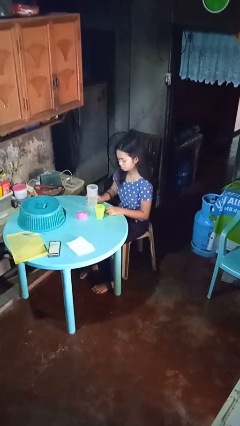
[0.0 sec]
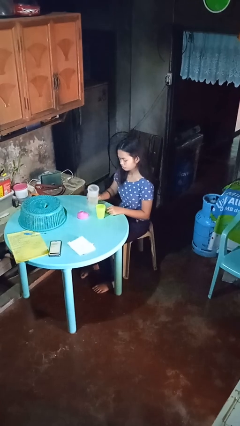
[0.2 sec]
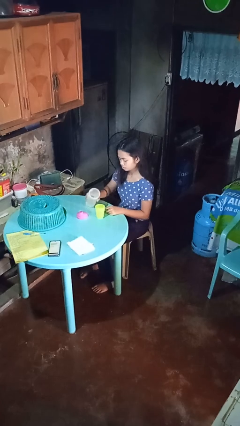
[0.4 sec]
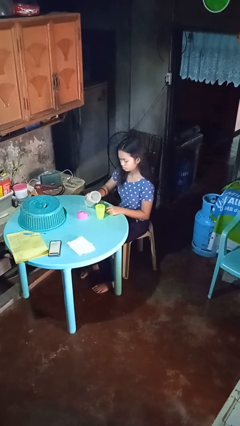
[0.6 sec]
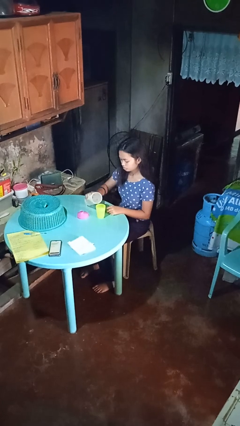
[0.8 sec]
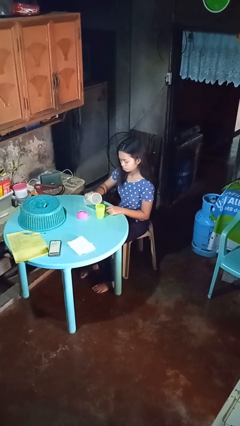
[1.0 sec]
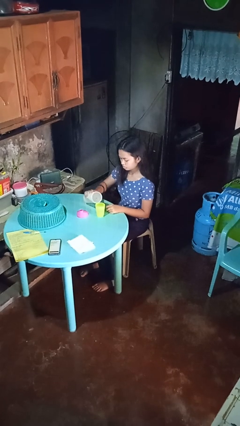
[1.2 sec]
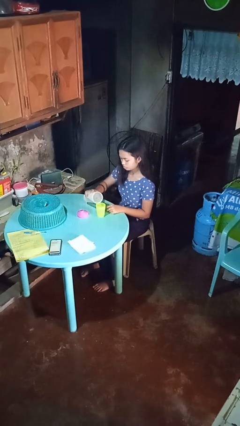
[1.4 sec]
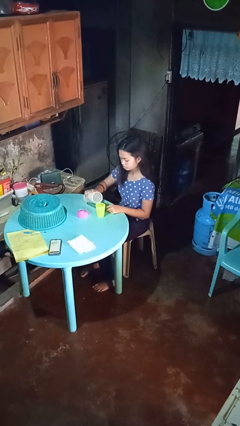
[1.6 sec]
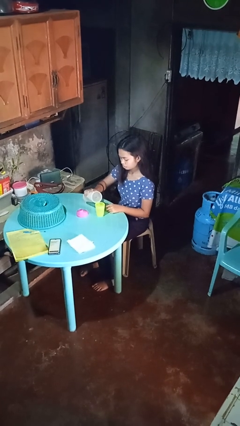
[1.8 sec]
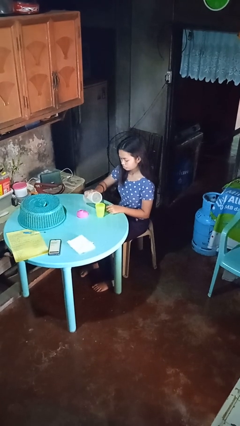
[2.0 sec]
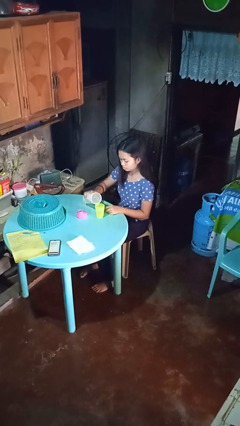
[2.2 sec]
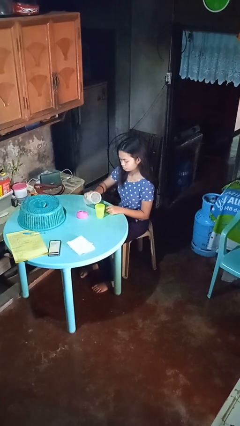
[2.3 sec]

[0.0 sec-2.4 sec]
person pours liquid into cup

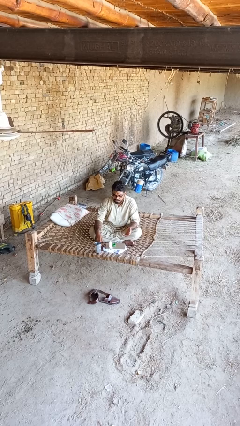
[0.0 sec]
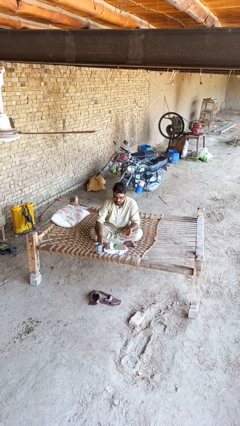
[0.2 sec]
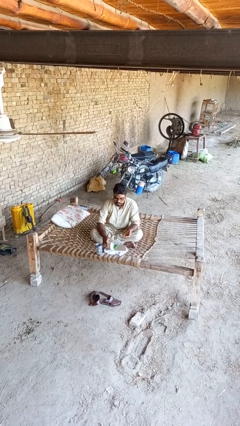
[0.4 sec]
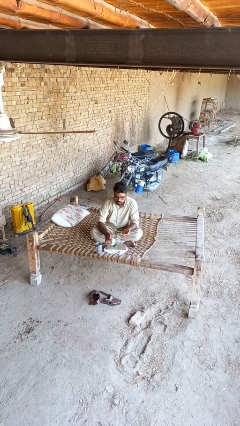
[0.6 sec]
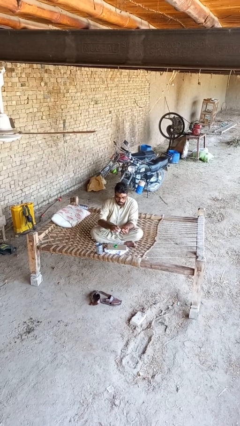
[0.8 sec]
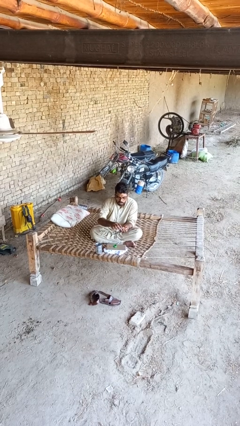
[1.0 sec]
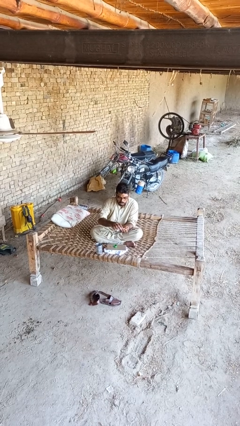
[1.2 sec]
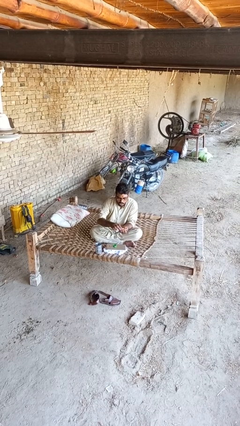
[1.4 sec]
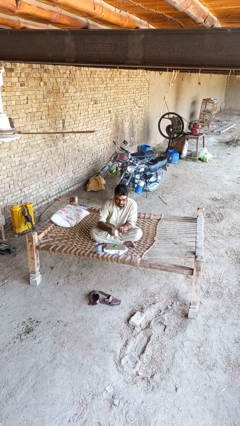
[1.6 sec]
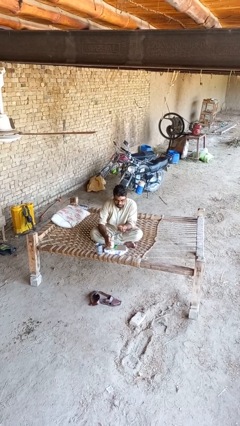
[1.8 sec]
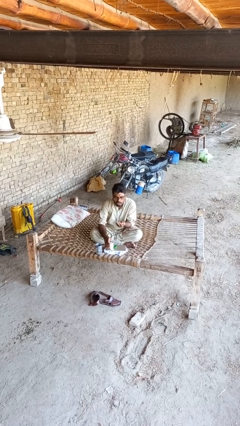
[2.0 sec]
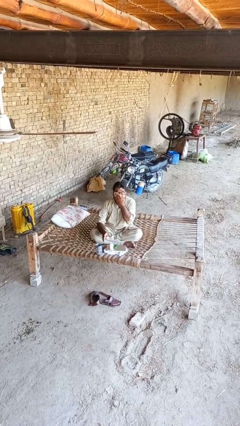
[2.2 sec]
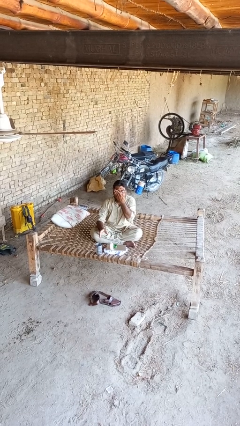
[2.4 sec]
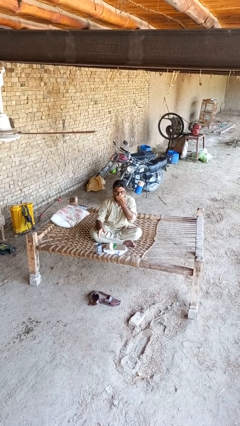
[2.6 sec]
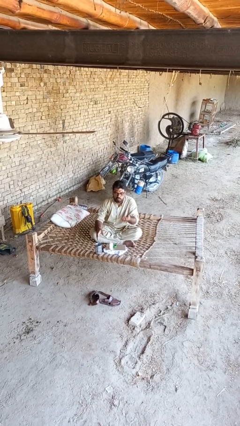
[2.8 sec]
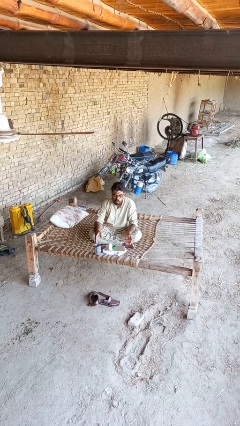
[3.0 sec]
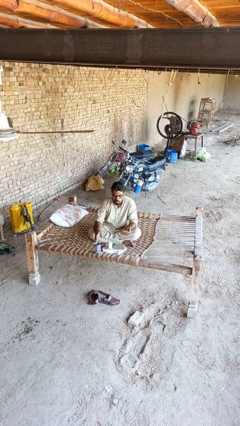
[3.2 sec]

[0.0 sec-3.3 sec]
person takes medicine pills

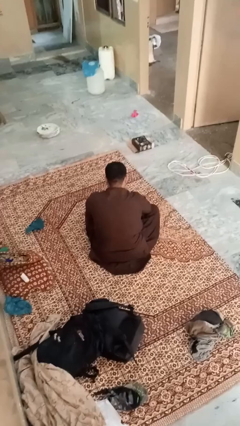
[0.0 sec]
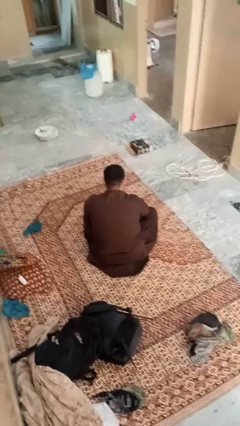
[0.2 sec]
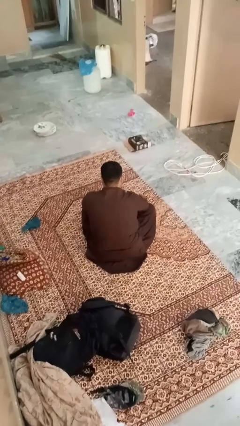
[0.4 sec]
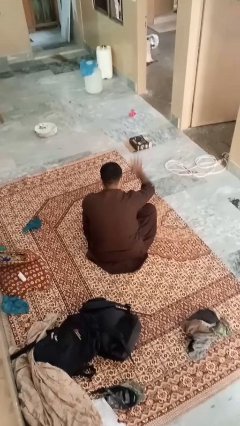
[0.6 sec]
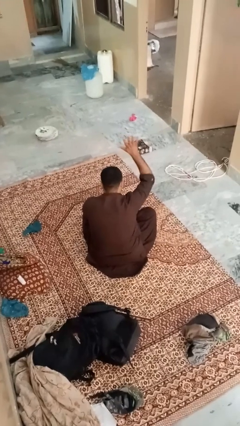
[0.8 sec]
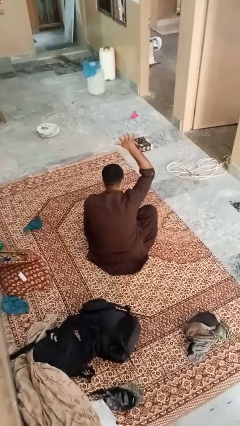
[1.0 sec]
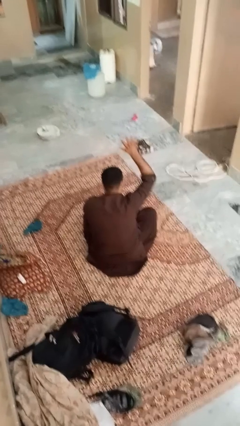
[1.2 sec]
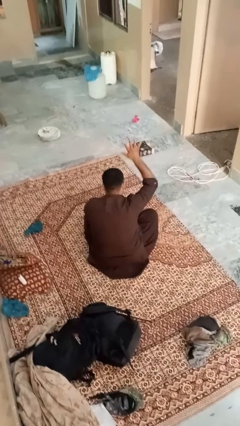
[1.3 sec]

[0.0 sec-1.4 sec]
person gestures number five

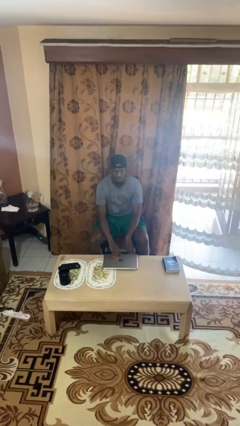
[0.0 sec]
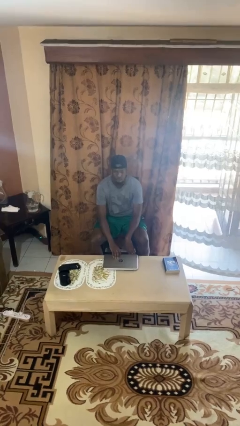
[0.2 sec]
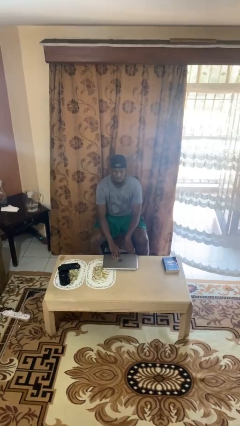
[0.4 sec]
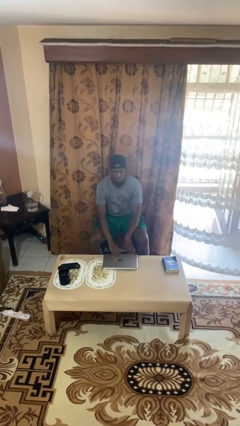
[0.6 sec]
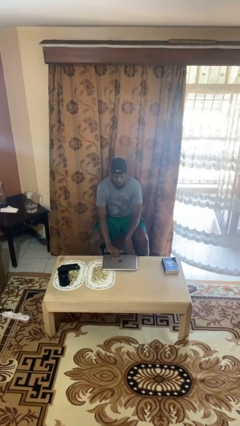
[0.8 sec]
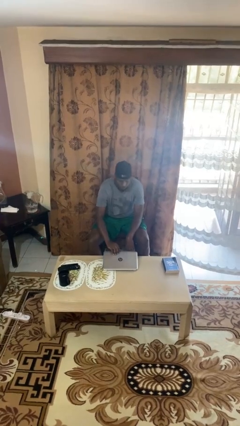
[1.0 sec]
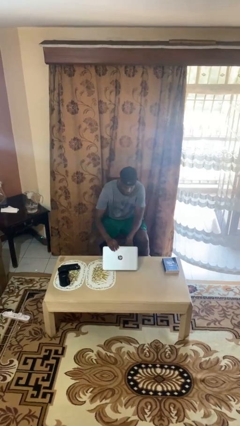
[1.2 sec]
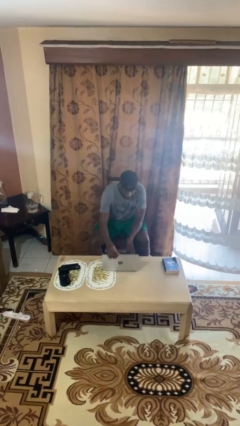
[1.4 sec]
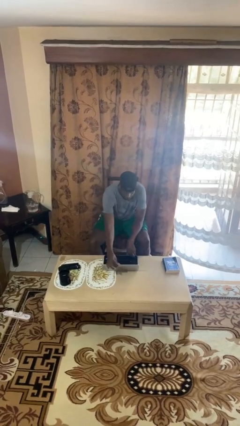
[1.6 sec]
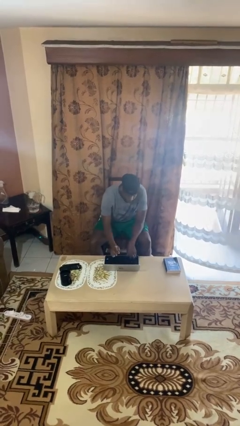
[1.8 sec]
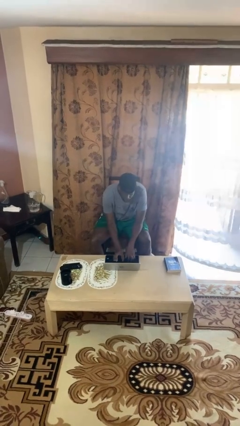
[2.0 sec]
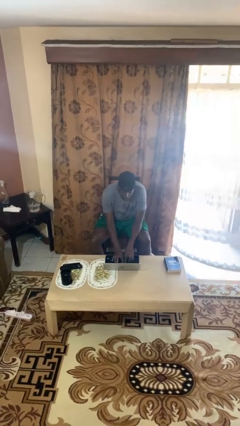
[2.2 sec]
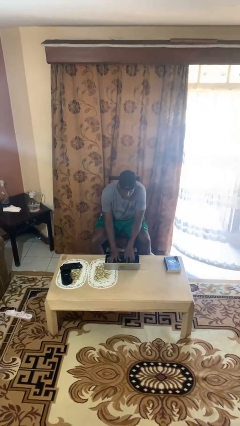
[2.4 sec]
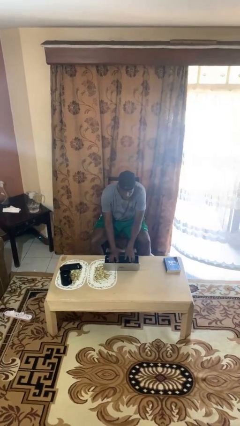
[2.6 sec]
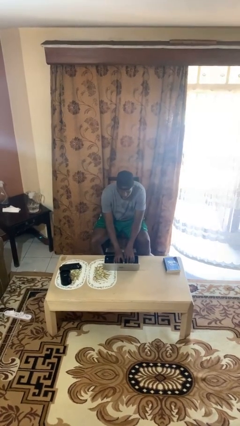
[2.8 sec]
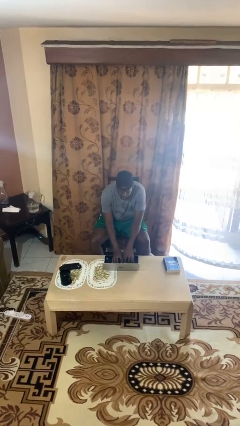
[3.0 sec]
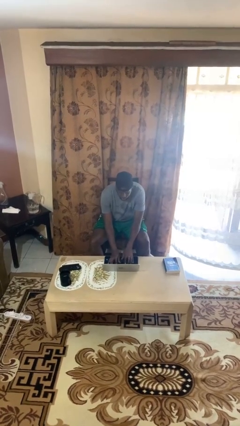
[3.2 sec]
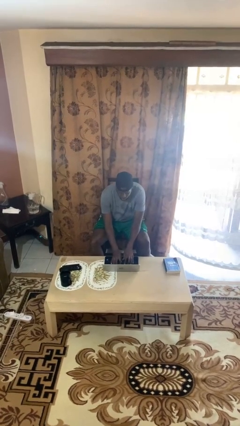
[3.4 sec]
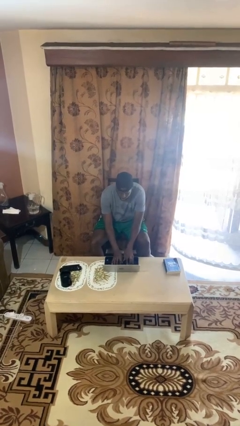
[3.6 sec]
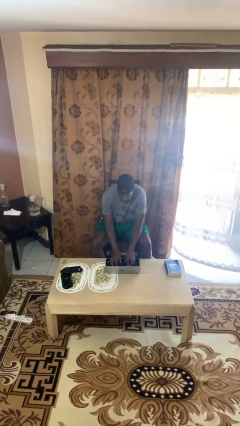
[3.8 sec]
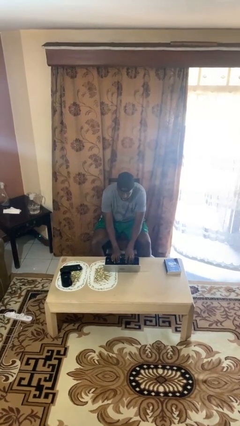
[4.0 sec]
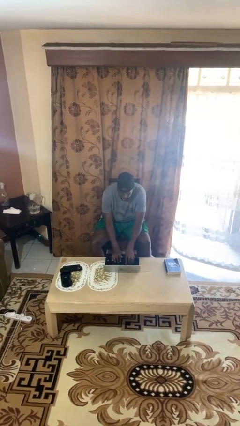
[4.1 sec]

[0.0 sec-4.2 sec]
person interacts with laptop

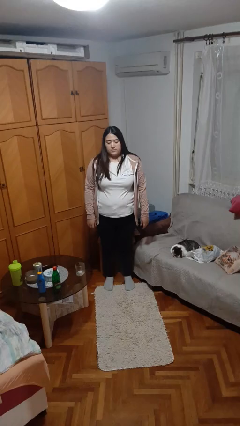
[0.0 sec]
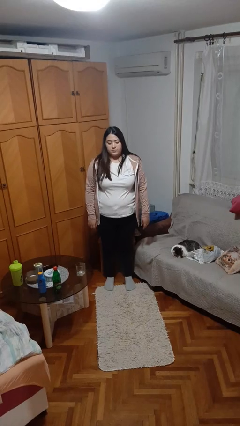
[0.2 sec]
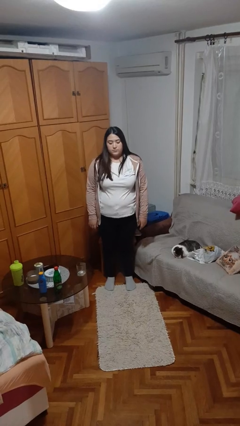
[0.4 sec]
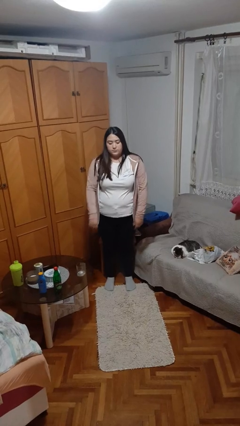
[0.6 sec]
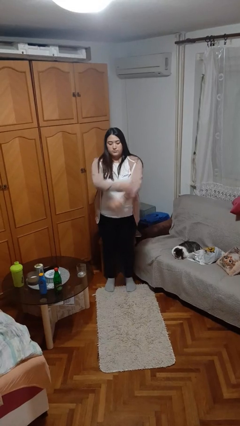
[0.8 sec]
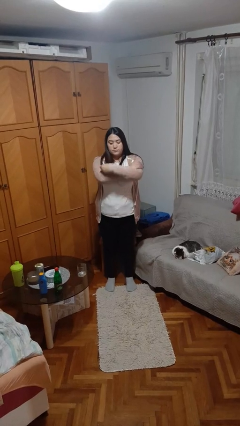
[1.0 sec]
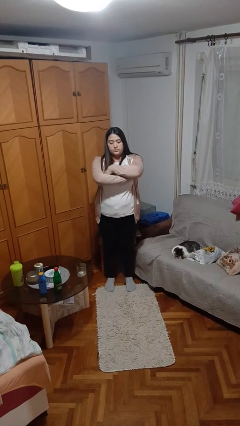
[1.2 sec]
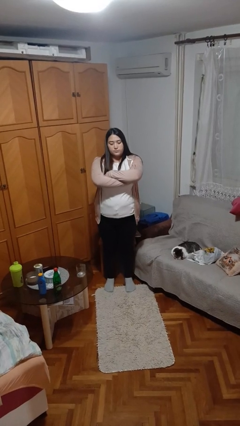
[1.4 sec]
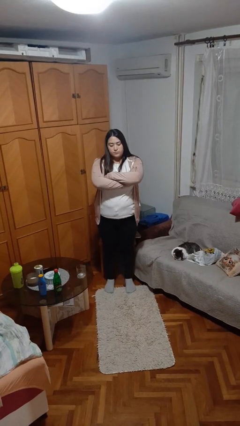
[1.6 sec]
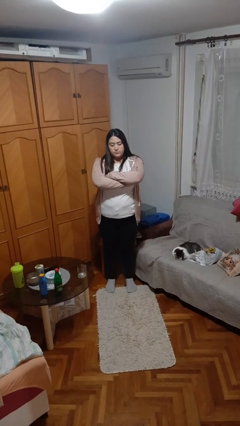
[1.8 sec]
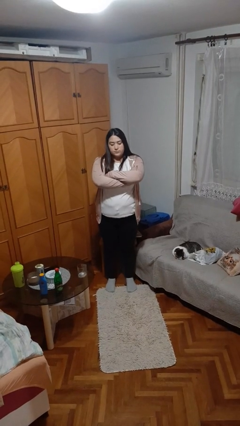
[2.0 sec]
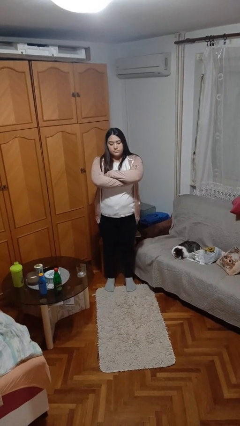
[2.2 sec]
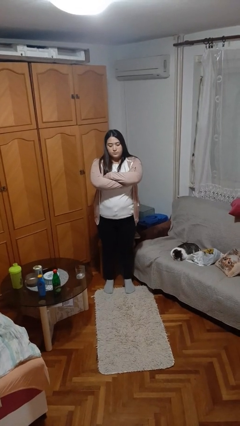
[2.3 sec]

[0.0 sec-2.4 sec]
person crosses arms

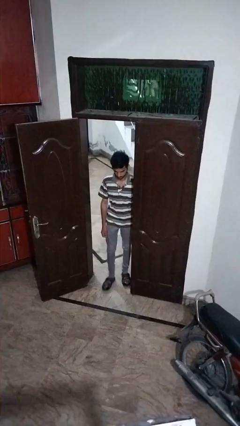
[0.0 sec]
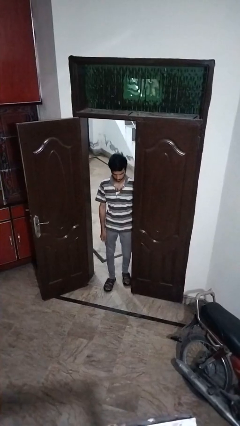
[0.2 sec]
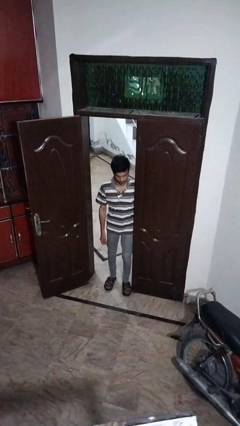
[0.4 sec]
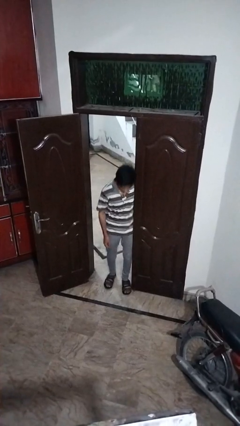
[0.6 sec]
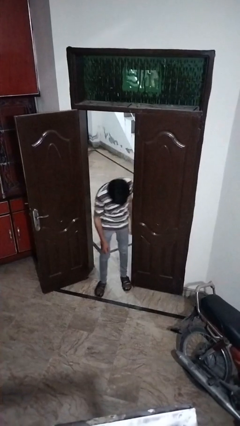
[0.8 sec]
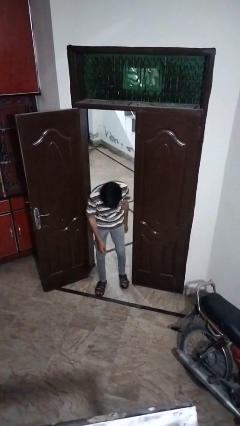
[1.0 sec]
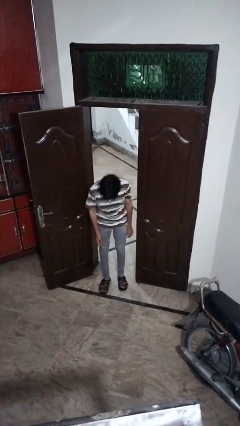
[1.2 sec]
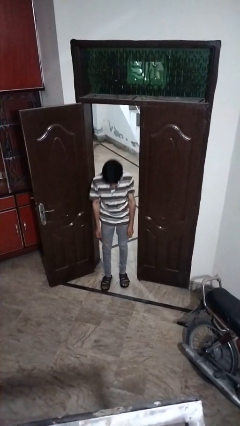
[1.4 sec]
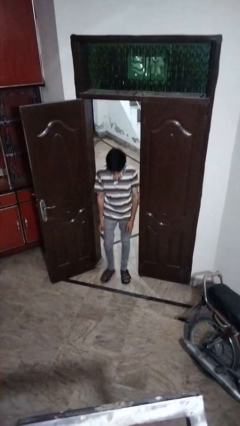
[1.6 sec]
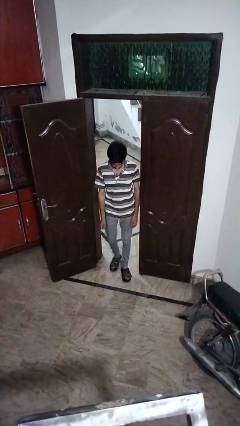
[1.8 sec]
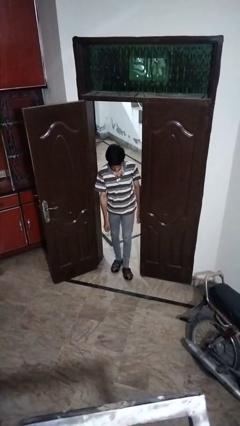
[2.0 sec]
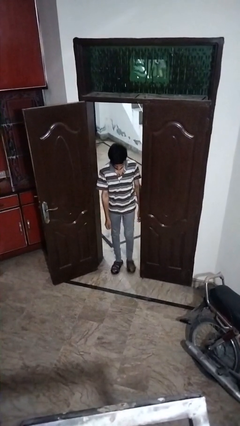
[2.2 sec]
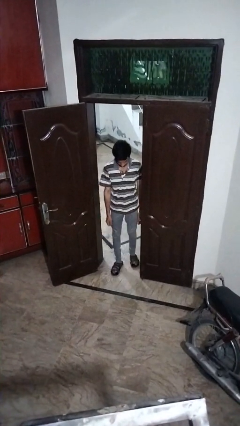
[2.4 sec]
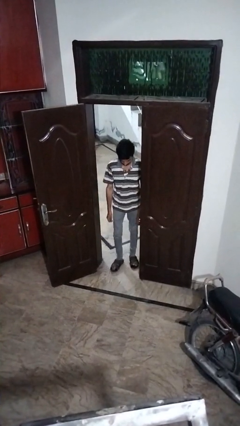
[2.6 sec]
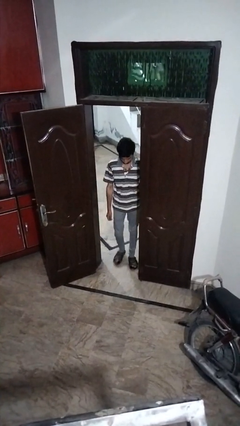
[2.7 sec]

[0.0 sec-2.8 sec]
person bumps into wall

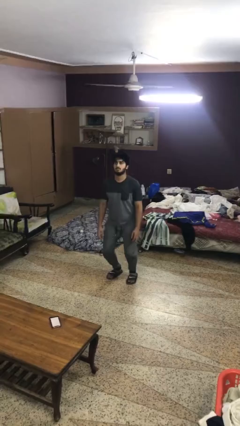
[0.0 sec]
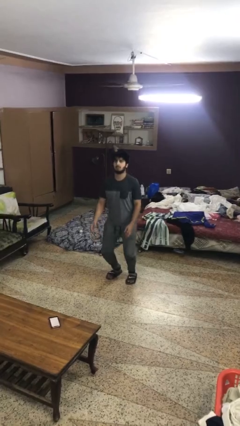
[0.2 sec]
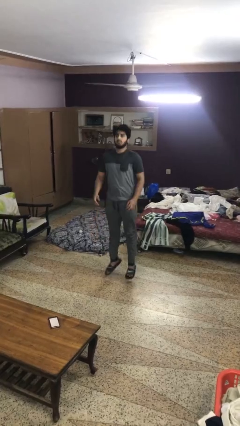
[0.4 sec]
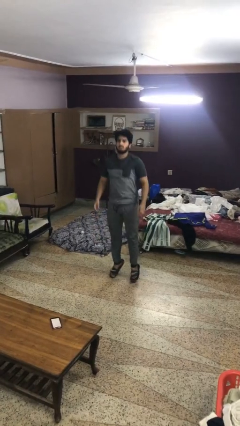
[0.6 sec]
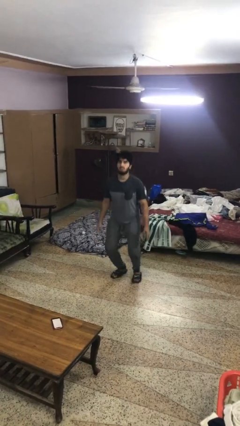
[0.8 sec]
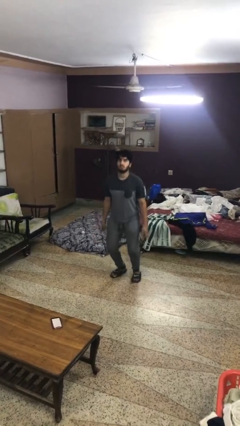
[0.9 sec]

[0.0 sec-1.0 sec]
person jumps
